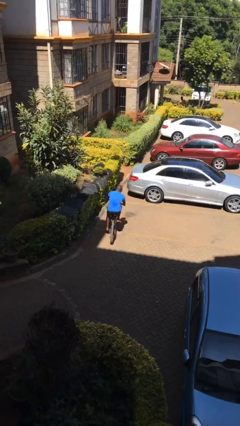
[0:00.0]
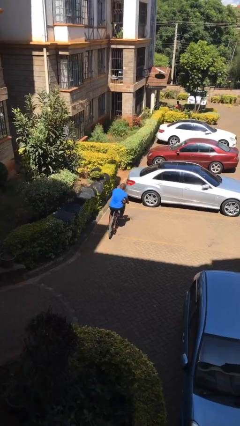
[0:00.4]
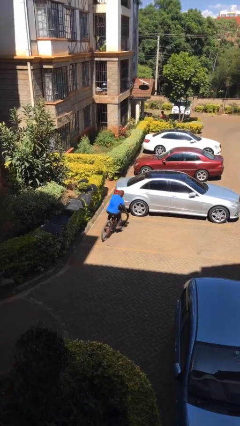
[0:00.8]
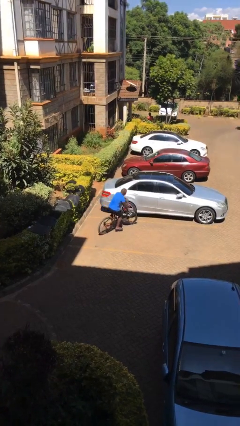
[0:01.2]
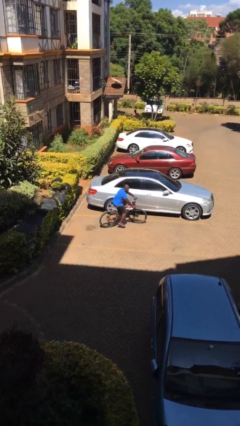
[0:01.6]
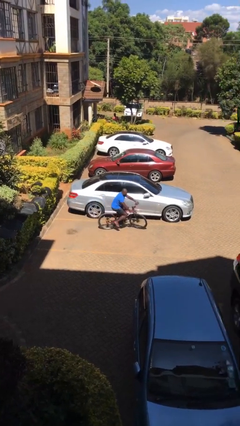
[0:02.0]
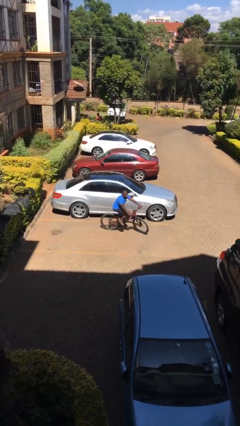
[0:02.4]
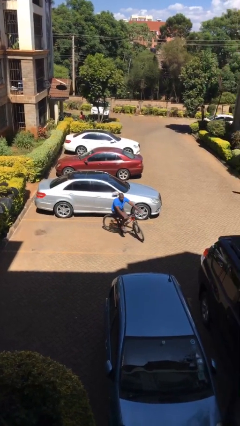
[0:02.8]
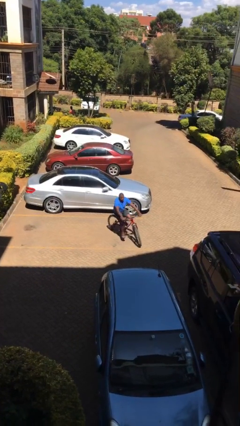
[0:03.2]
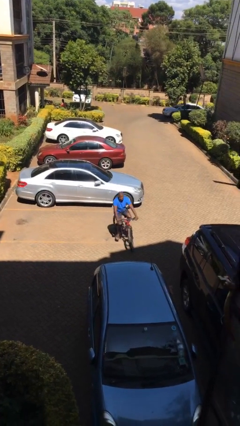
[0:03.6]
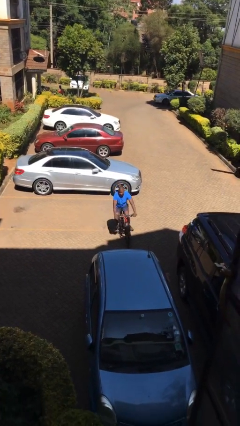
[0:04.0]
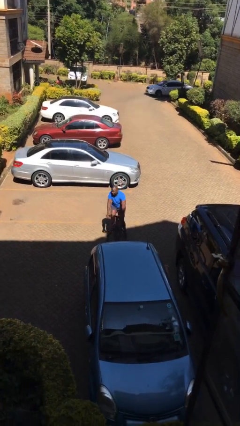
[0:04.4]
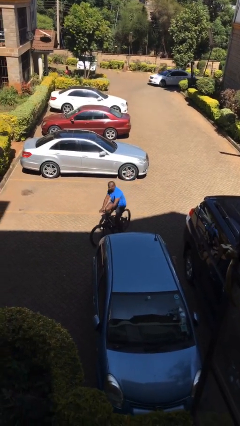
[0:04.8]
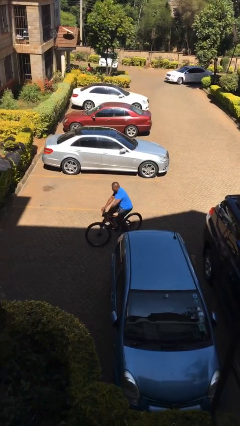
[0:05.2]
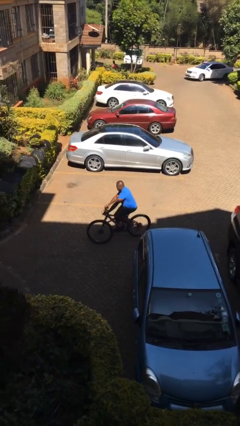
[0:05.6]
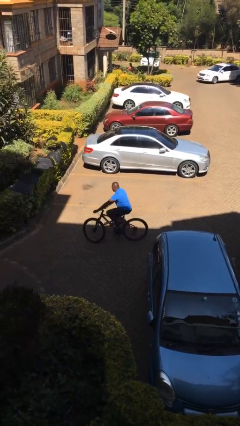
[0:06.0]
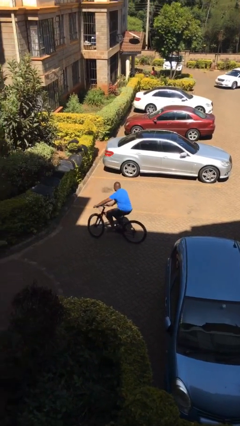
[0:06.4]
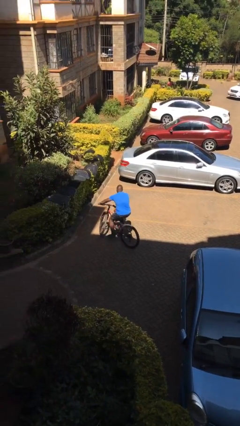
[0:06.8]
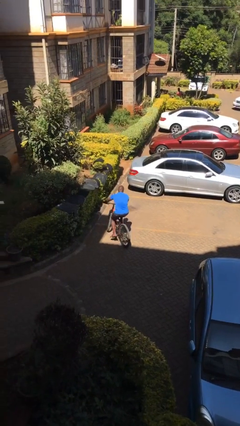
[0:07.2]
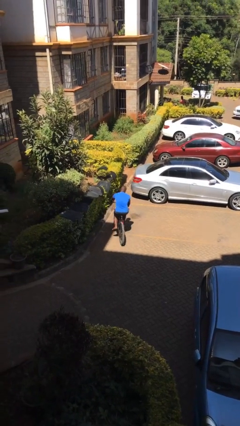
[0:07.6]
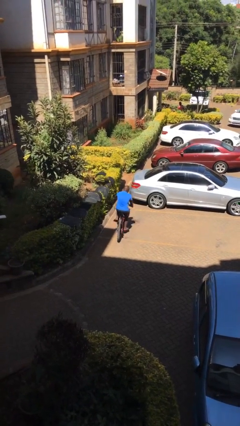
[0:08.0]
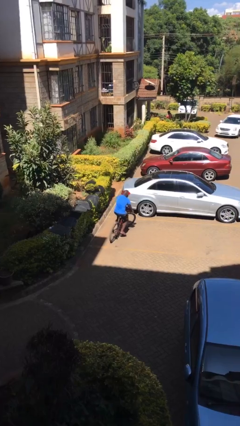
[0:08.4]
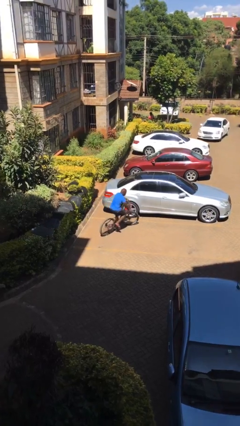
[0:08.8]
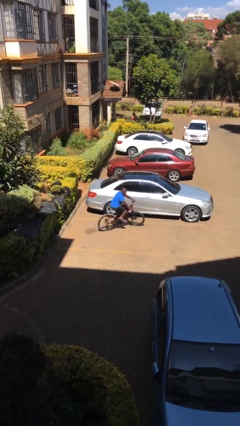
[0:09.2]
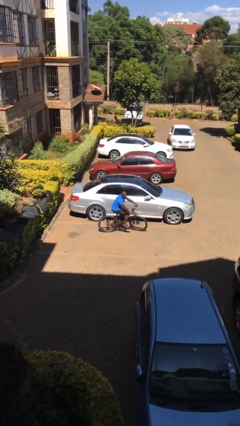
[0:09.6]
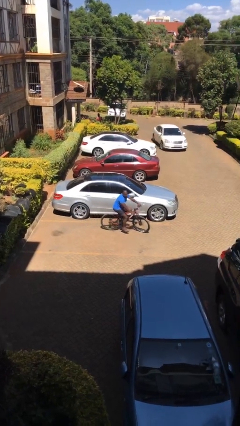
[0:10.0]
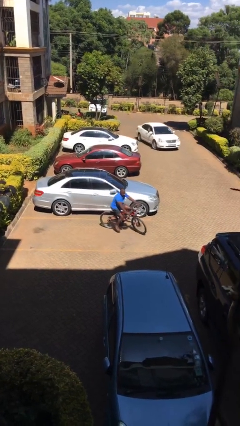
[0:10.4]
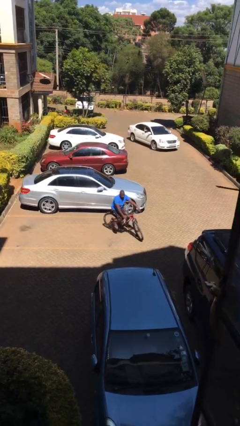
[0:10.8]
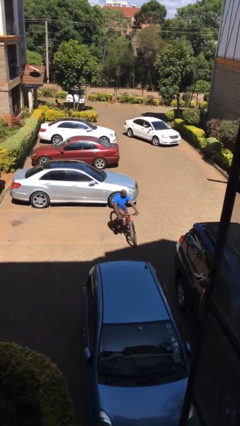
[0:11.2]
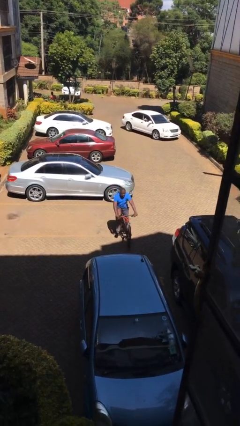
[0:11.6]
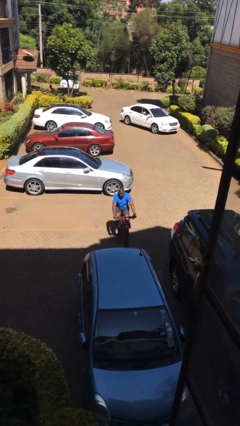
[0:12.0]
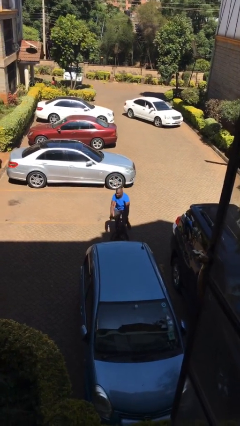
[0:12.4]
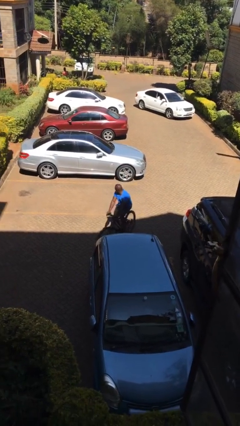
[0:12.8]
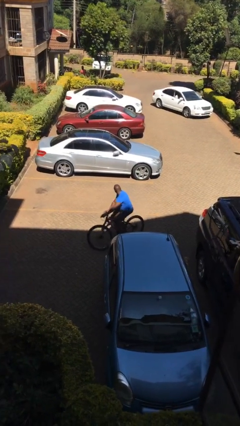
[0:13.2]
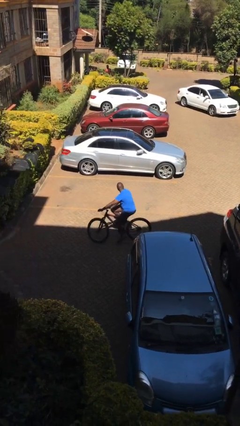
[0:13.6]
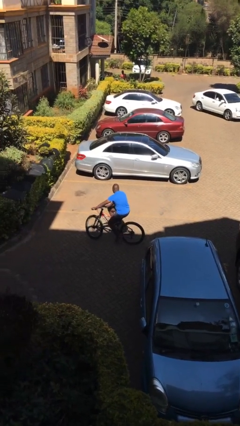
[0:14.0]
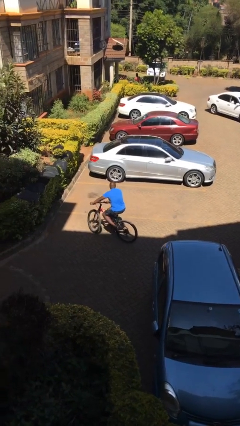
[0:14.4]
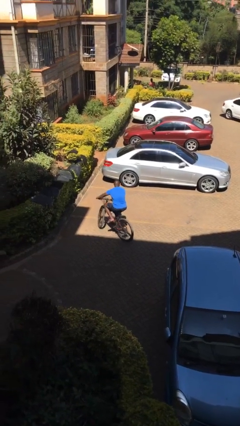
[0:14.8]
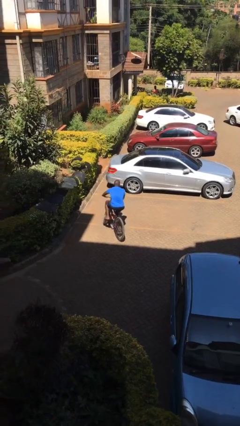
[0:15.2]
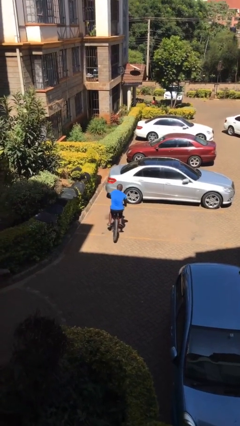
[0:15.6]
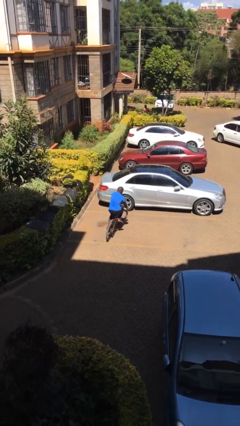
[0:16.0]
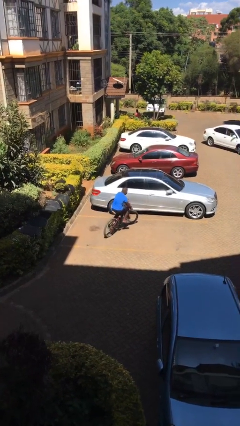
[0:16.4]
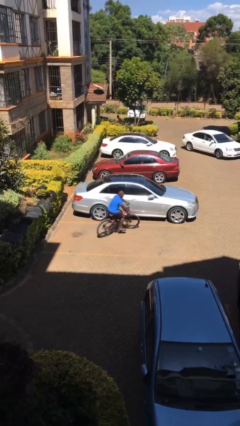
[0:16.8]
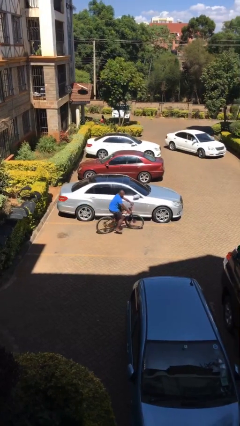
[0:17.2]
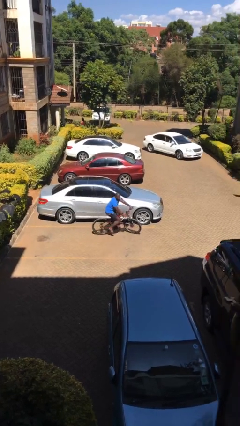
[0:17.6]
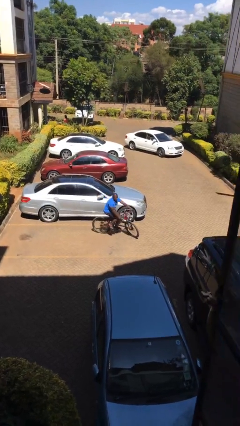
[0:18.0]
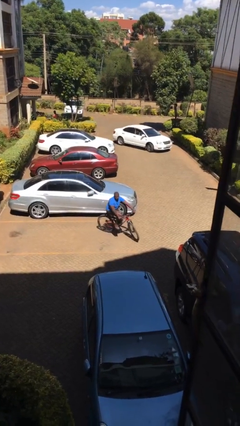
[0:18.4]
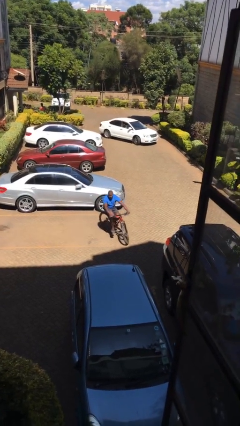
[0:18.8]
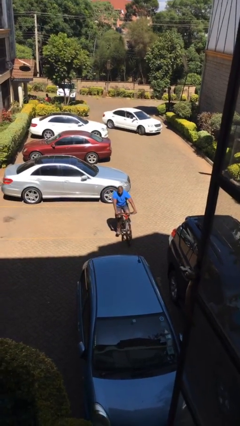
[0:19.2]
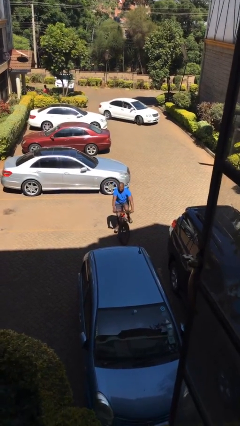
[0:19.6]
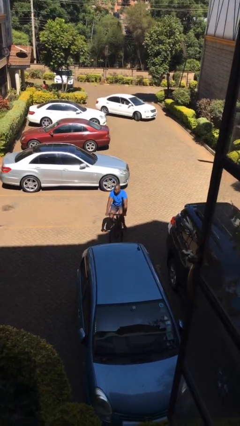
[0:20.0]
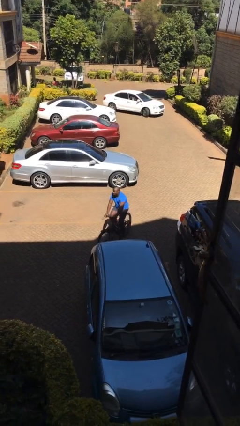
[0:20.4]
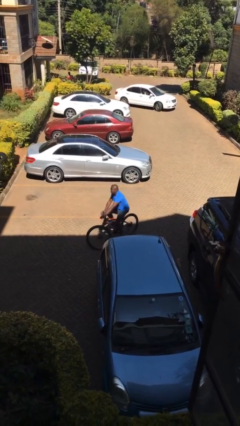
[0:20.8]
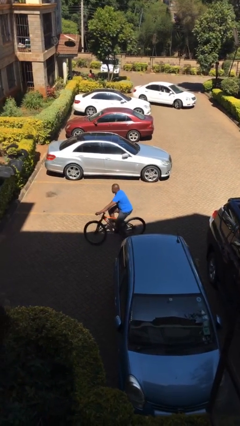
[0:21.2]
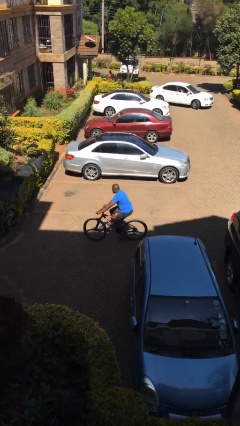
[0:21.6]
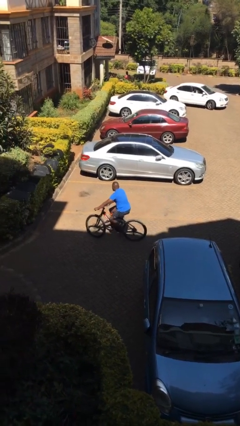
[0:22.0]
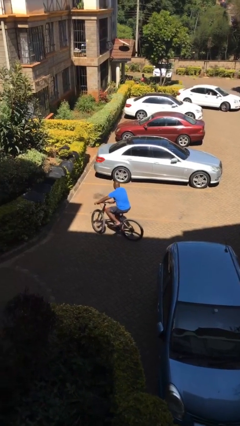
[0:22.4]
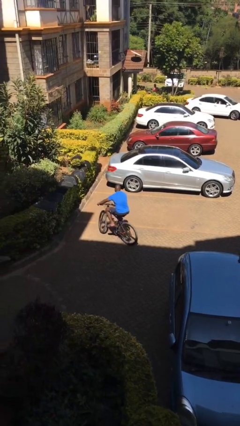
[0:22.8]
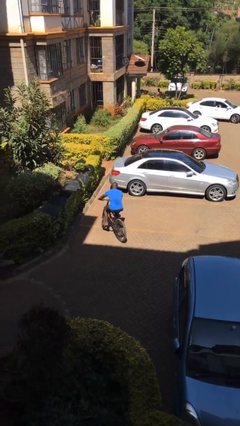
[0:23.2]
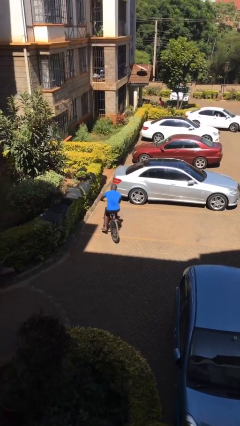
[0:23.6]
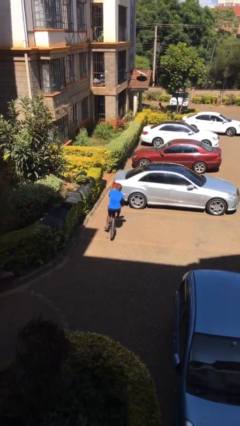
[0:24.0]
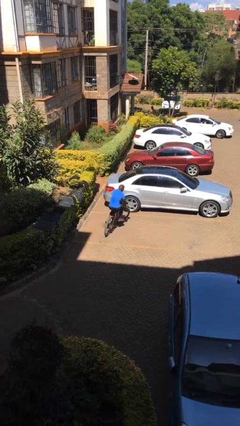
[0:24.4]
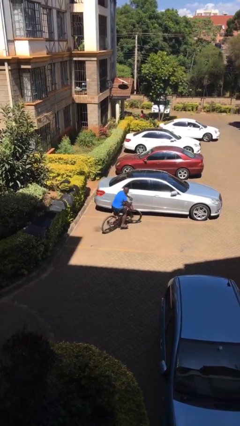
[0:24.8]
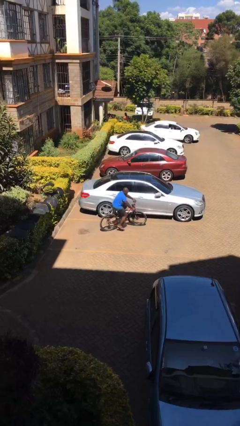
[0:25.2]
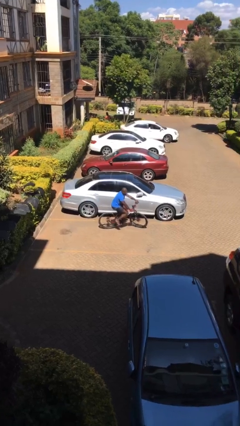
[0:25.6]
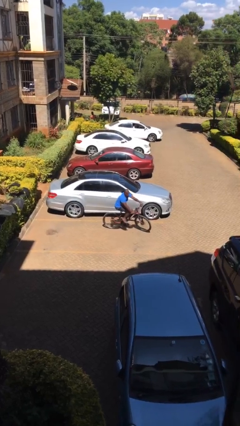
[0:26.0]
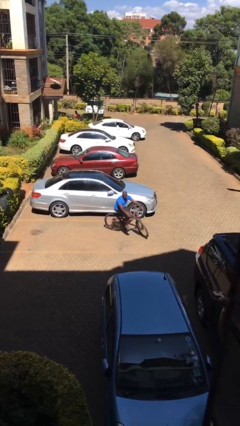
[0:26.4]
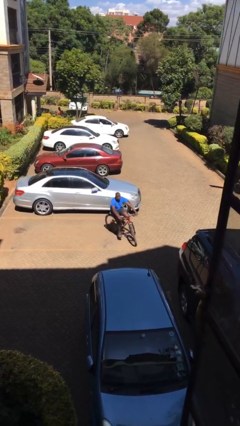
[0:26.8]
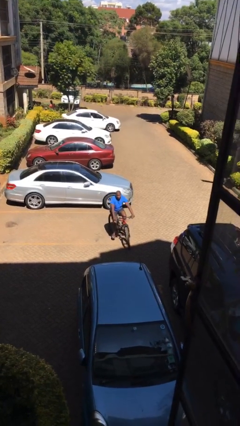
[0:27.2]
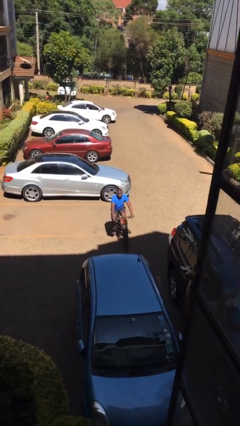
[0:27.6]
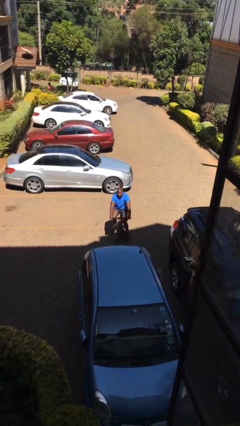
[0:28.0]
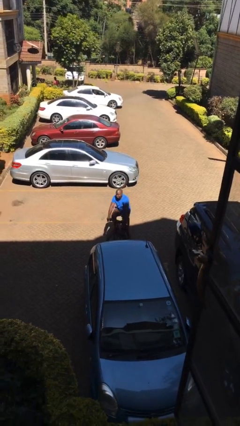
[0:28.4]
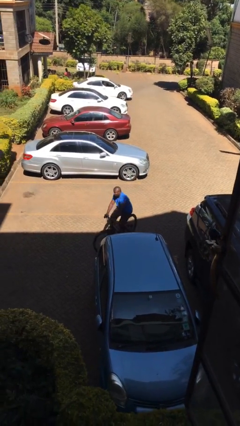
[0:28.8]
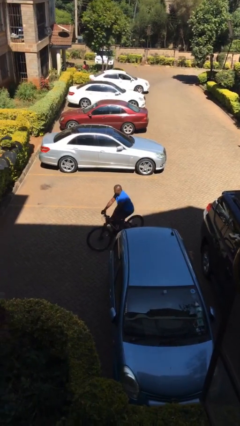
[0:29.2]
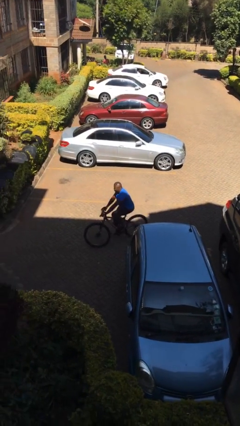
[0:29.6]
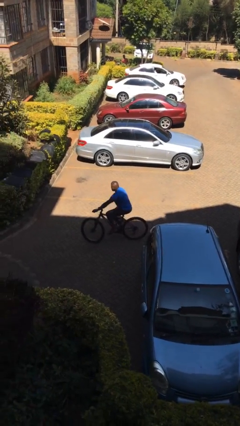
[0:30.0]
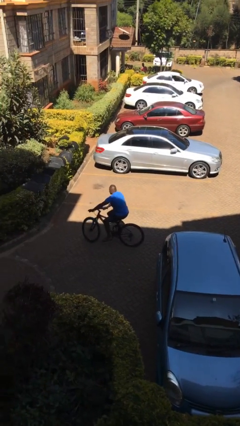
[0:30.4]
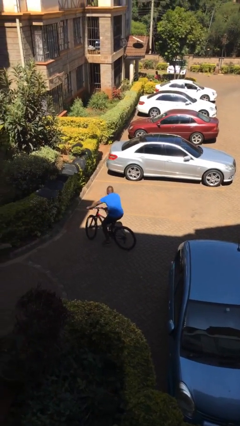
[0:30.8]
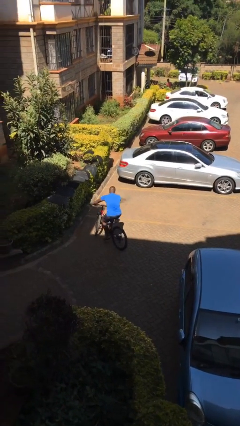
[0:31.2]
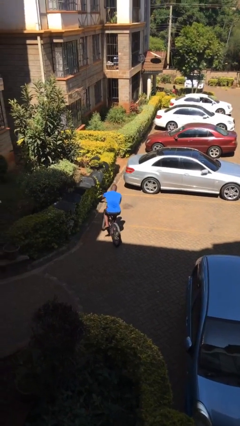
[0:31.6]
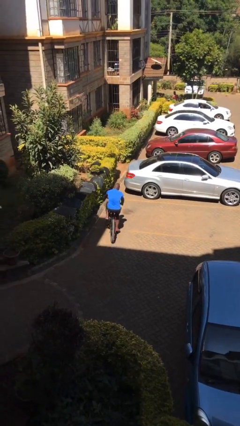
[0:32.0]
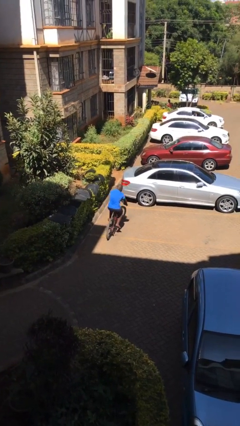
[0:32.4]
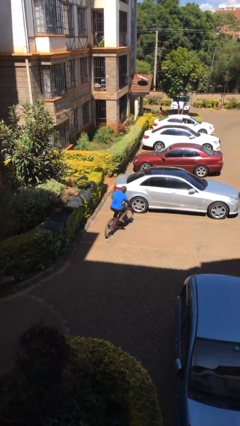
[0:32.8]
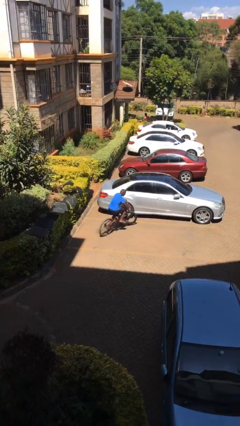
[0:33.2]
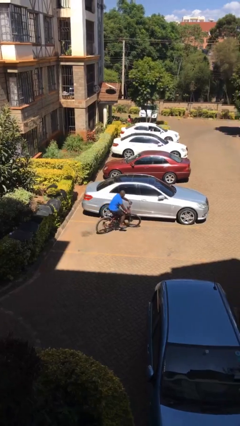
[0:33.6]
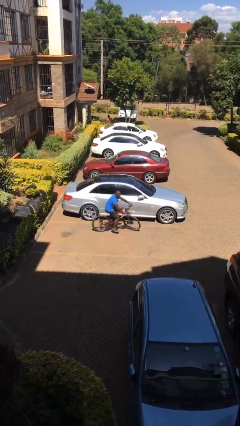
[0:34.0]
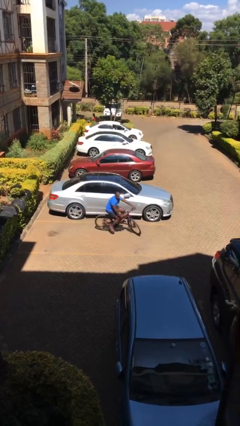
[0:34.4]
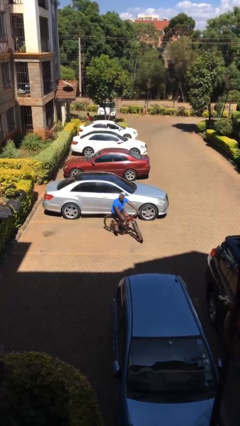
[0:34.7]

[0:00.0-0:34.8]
person rides bicycle

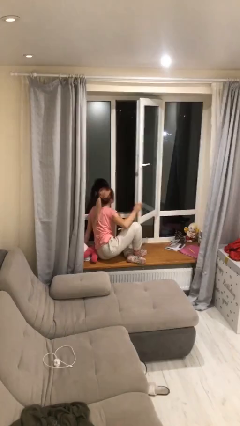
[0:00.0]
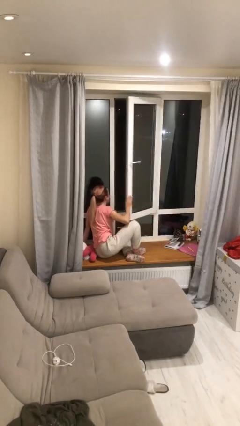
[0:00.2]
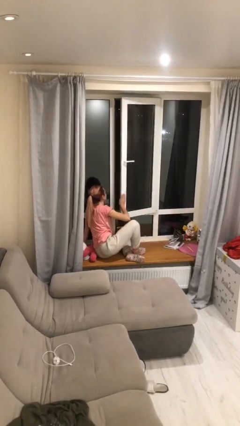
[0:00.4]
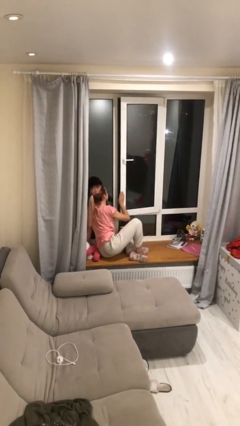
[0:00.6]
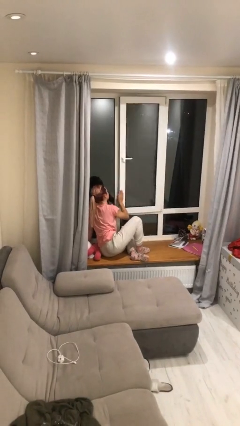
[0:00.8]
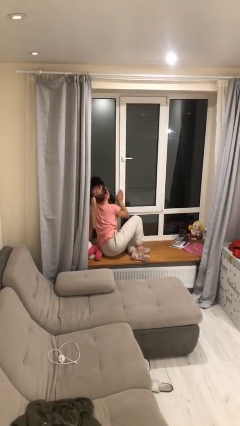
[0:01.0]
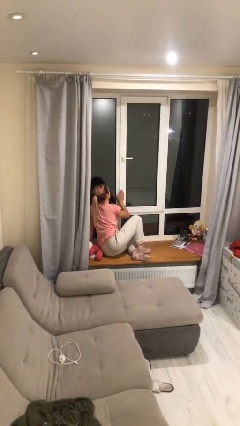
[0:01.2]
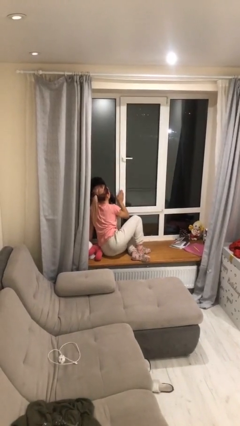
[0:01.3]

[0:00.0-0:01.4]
person closes home window
